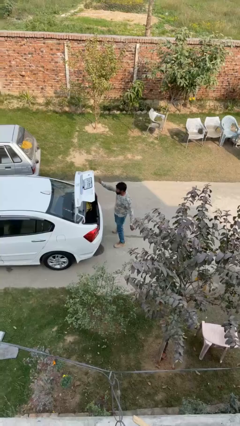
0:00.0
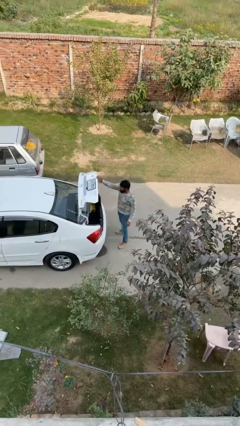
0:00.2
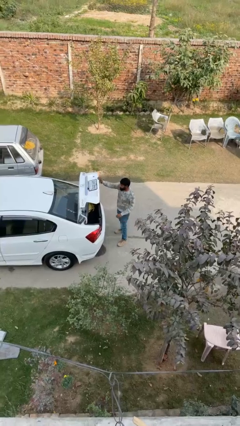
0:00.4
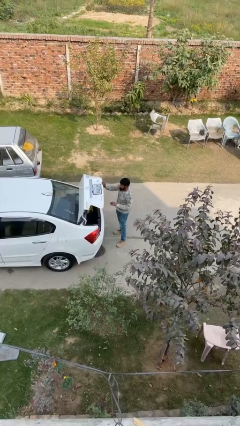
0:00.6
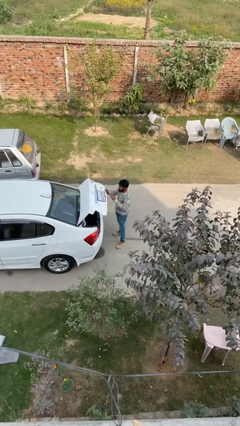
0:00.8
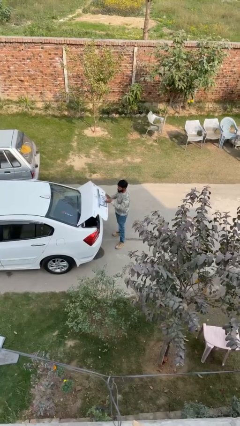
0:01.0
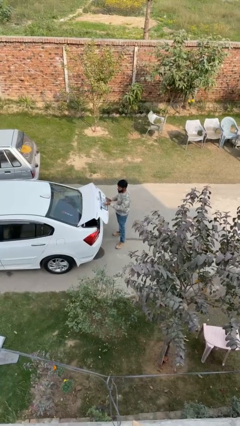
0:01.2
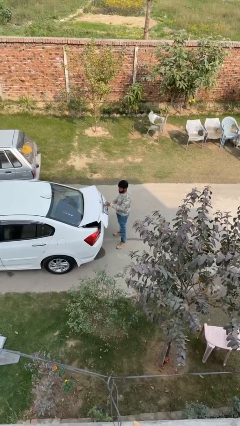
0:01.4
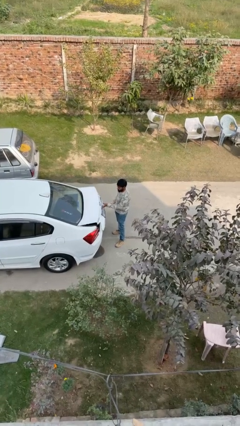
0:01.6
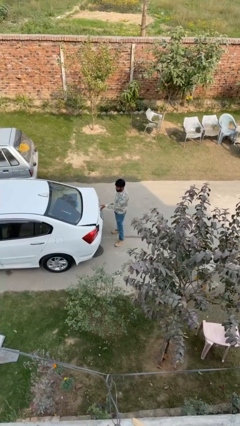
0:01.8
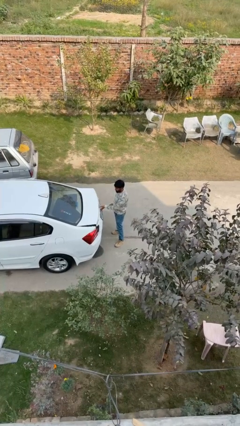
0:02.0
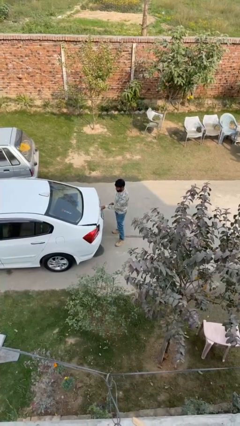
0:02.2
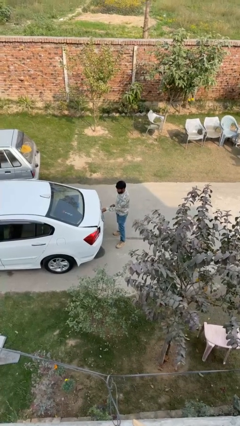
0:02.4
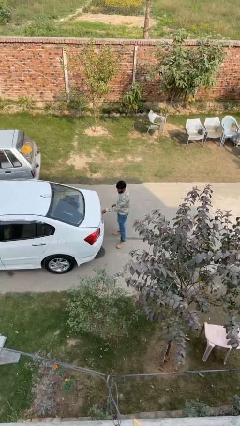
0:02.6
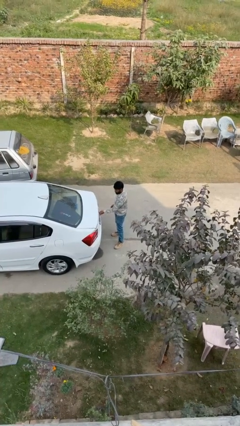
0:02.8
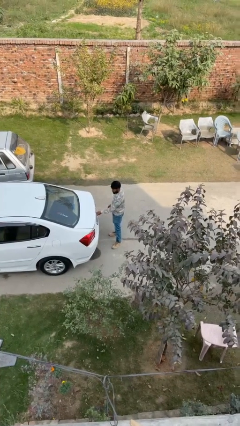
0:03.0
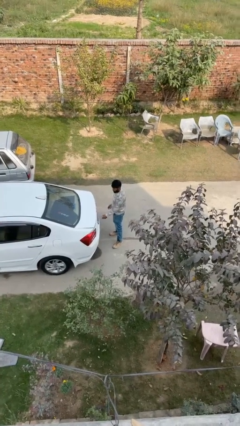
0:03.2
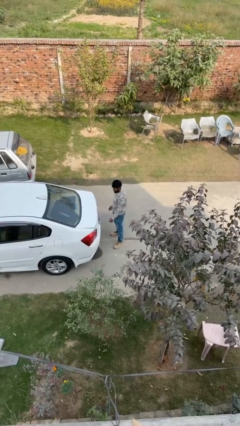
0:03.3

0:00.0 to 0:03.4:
person closes car trunk

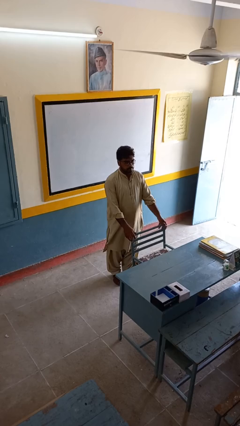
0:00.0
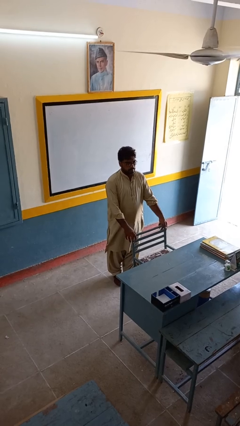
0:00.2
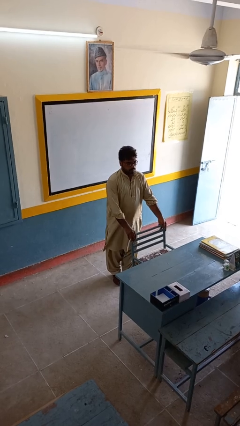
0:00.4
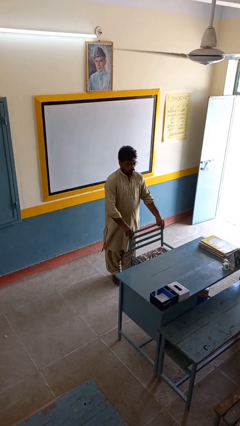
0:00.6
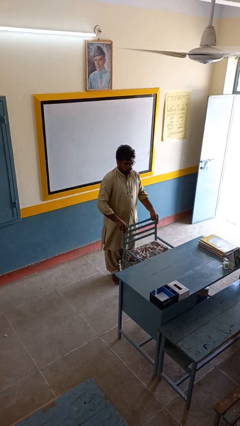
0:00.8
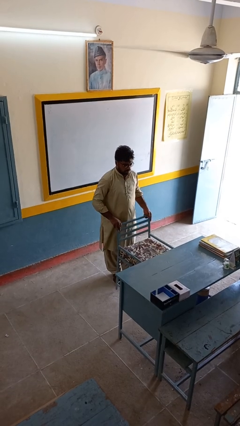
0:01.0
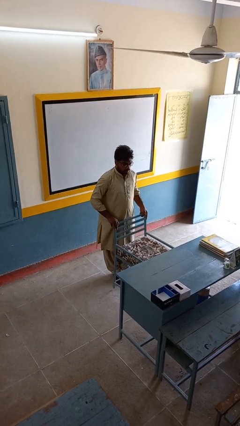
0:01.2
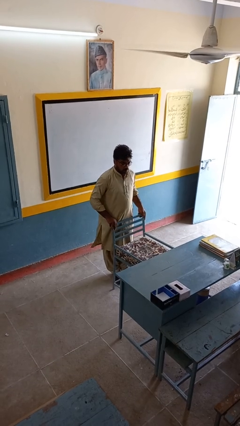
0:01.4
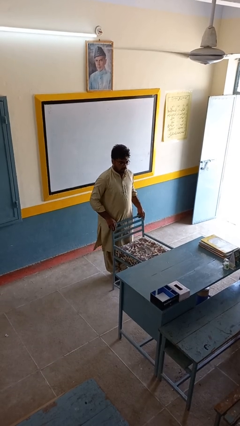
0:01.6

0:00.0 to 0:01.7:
person pulls out chair

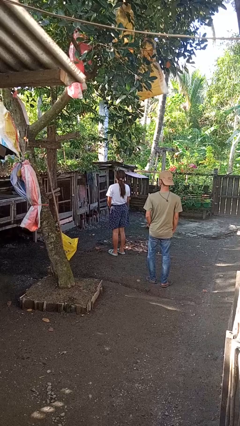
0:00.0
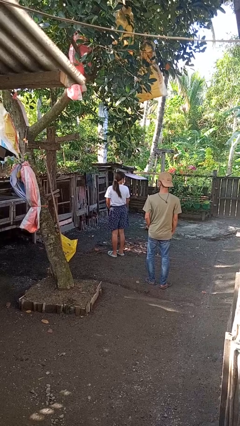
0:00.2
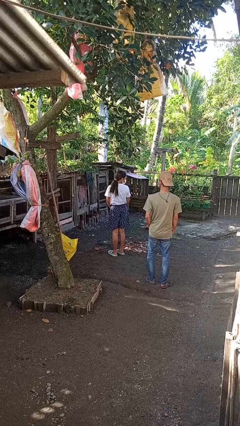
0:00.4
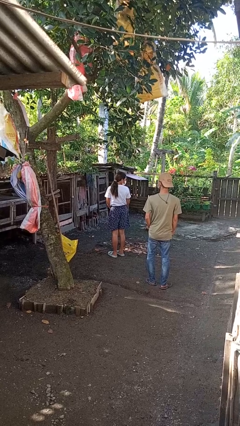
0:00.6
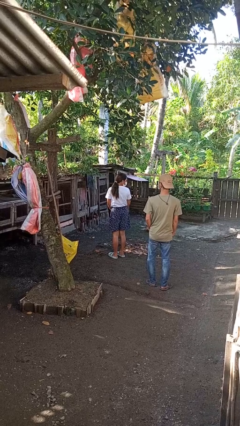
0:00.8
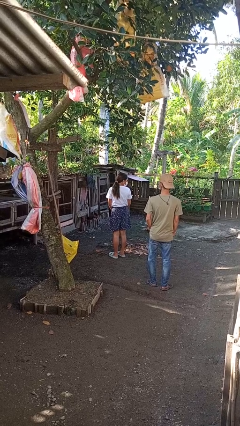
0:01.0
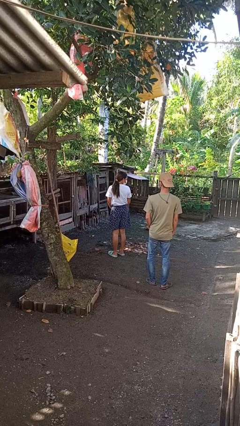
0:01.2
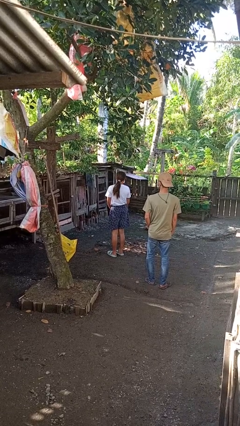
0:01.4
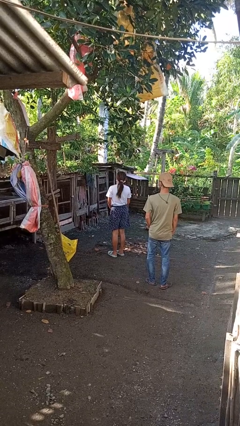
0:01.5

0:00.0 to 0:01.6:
person looks over shoulder

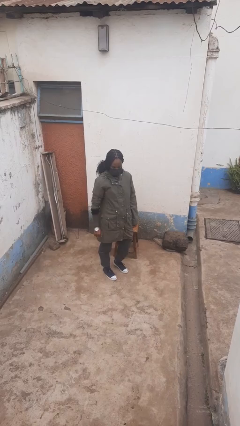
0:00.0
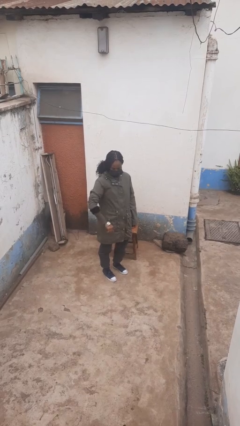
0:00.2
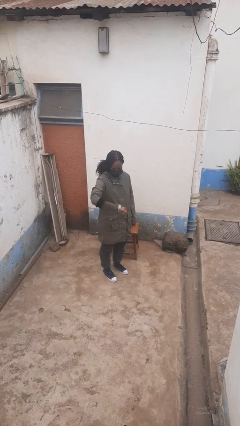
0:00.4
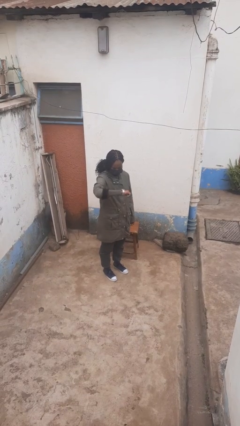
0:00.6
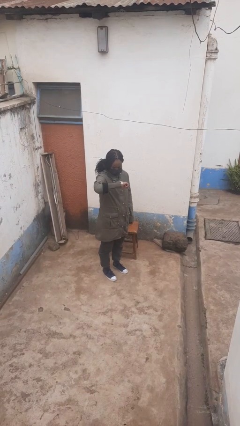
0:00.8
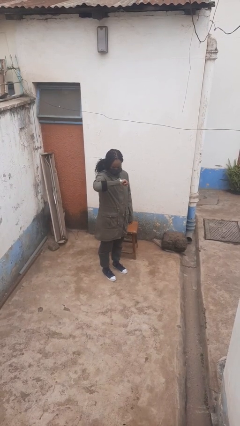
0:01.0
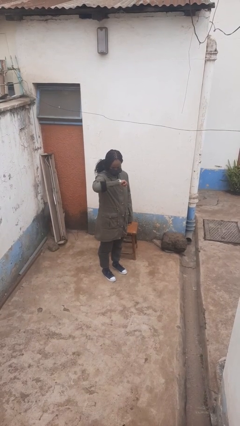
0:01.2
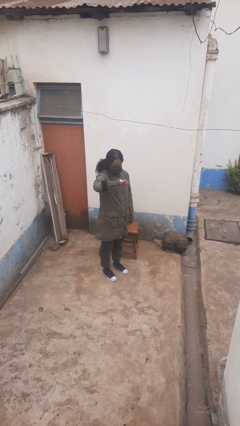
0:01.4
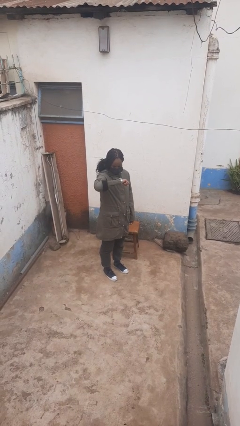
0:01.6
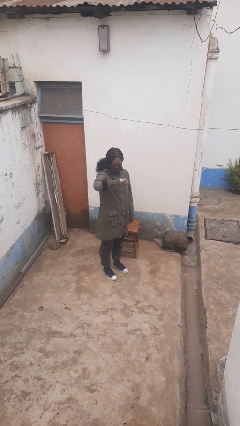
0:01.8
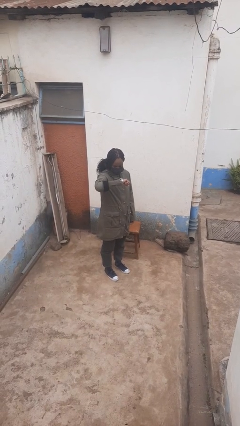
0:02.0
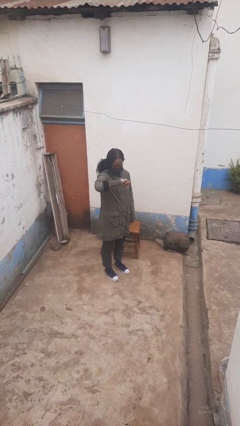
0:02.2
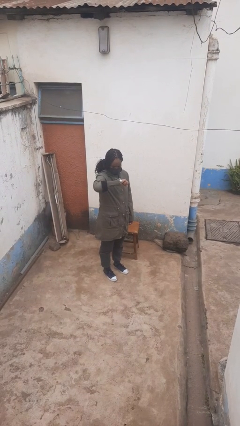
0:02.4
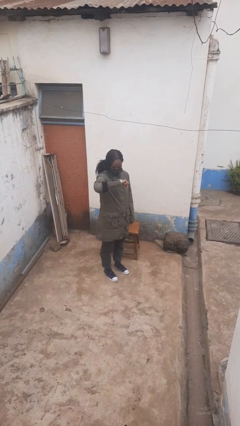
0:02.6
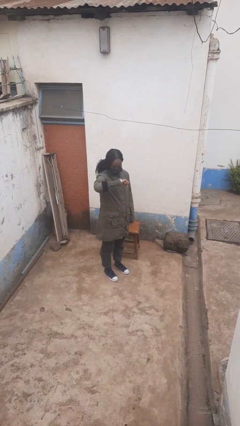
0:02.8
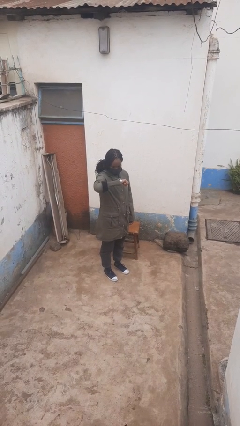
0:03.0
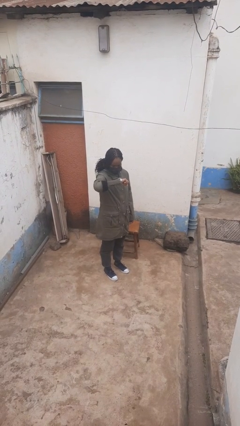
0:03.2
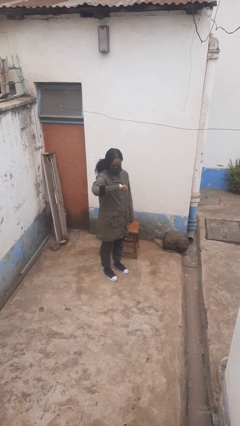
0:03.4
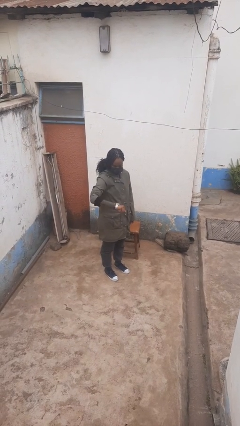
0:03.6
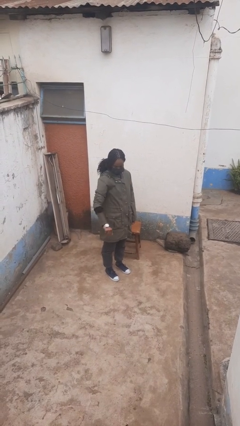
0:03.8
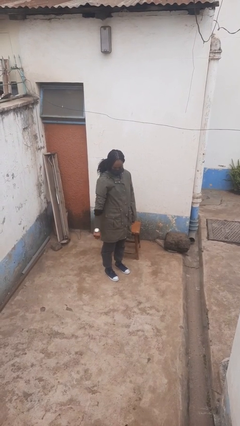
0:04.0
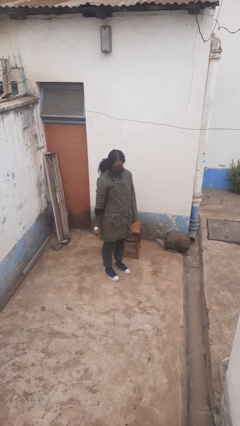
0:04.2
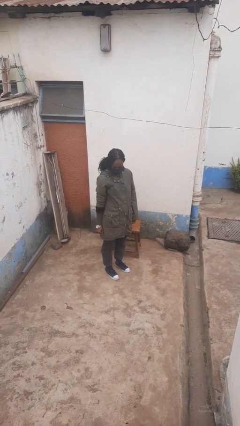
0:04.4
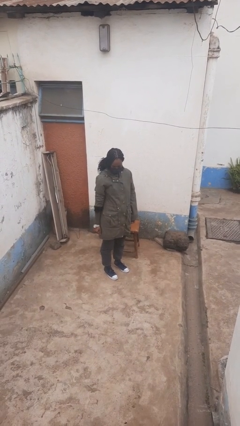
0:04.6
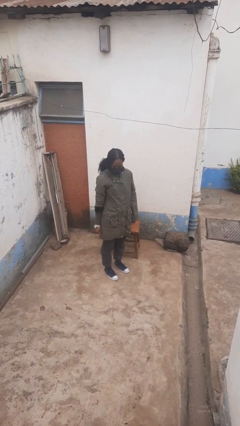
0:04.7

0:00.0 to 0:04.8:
person looks at wristwatch

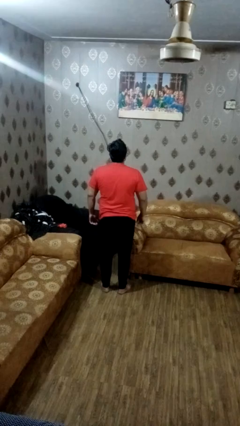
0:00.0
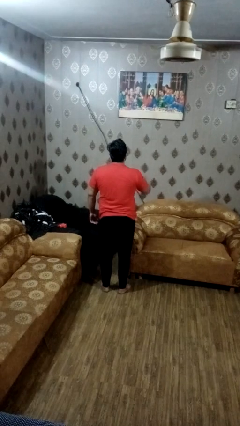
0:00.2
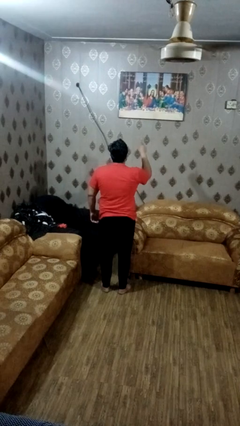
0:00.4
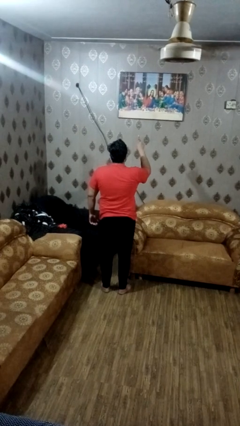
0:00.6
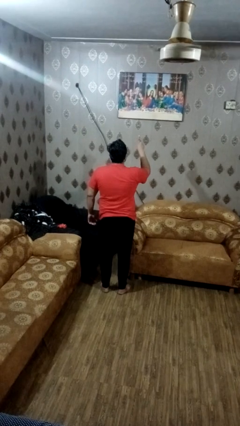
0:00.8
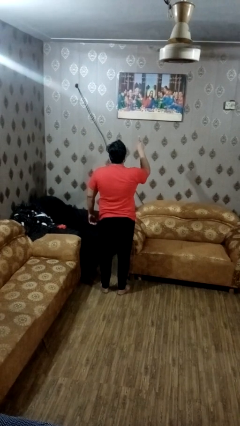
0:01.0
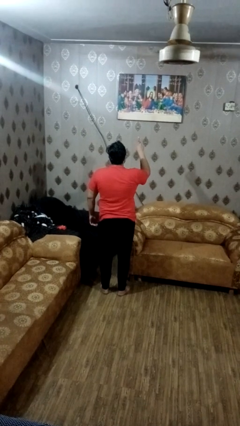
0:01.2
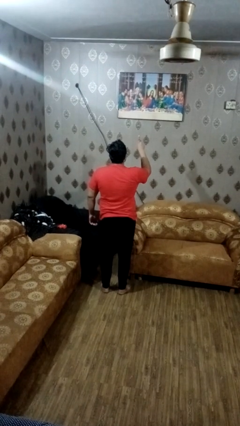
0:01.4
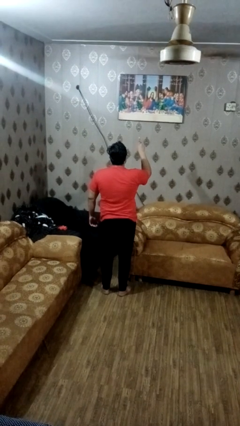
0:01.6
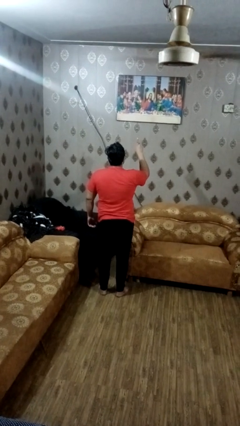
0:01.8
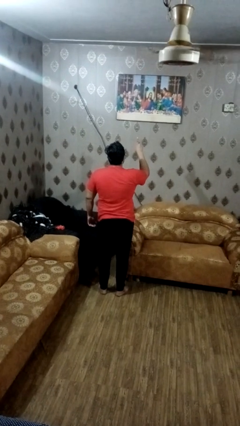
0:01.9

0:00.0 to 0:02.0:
person gestures number one

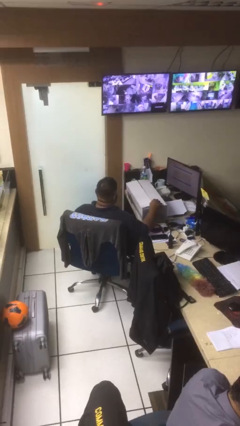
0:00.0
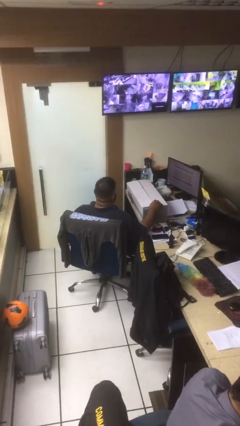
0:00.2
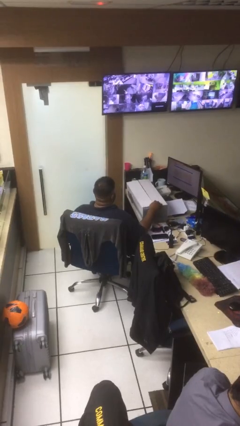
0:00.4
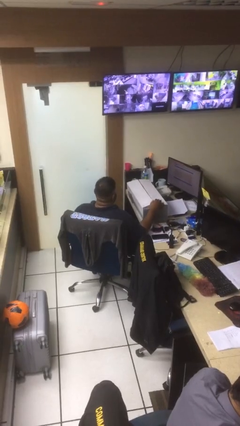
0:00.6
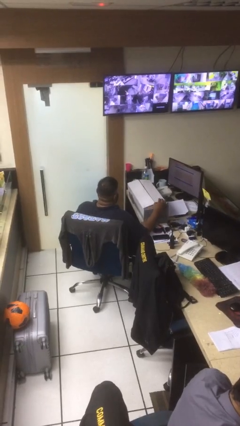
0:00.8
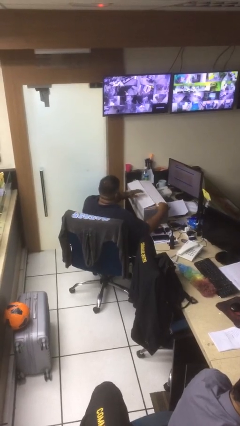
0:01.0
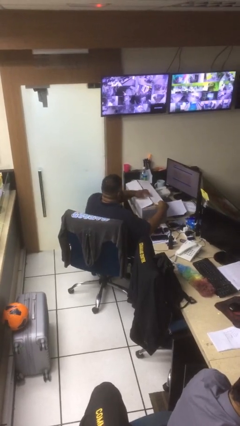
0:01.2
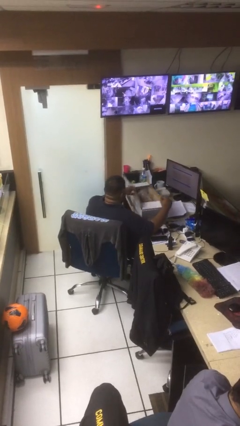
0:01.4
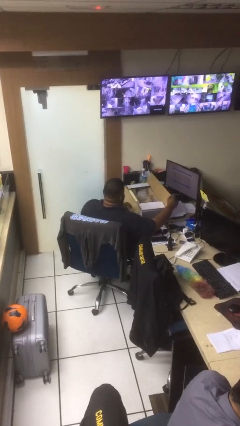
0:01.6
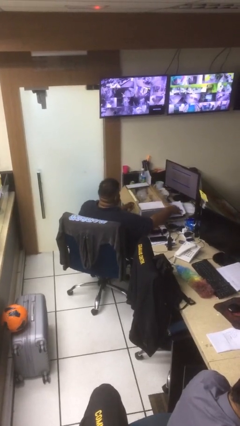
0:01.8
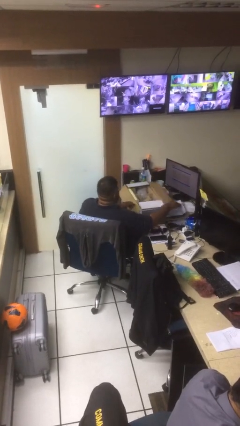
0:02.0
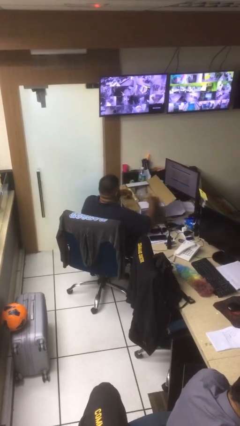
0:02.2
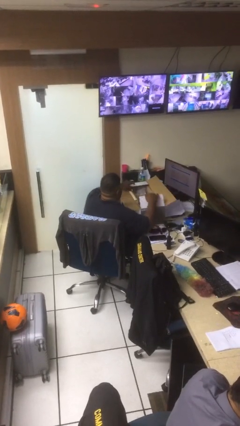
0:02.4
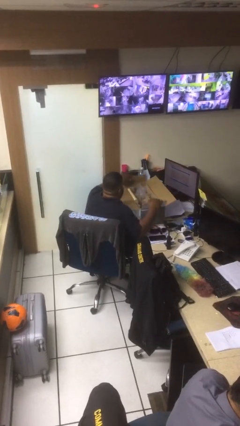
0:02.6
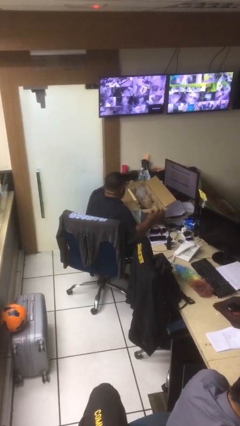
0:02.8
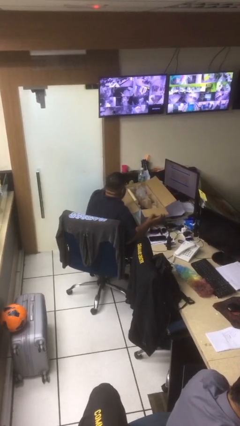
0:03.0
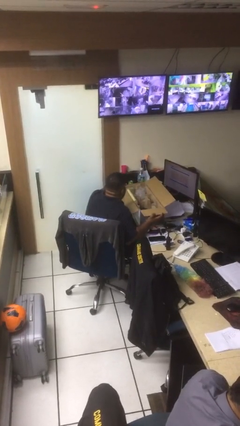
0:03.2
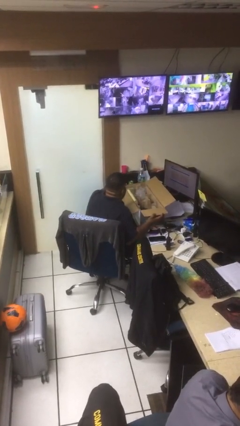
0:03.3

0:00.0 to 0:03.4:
person opens box

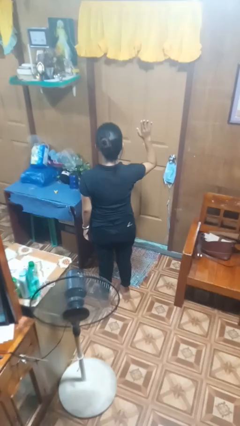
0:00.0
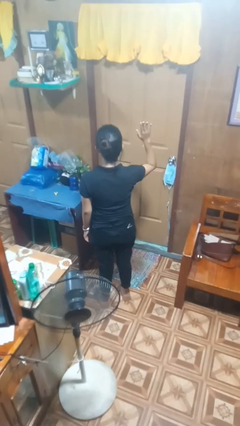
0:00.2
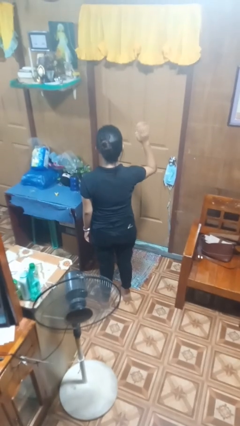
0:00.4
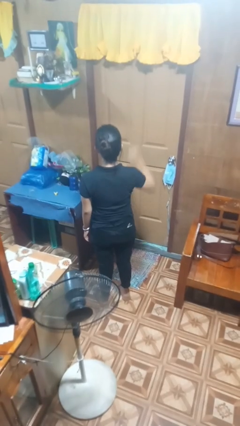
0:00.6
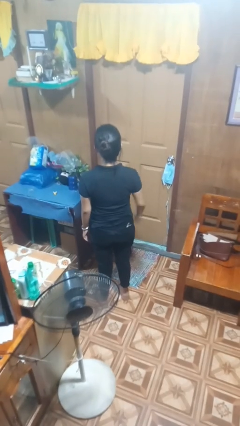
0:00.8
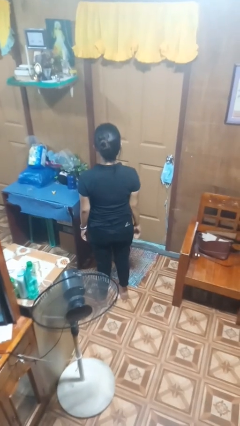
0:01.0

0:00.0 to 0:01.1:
person gestures lower hand
